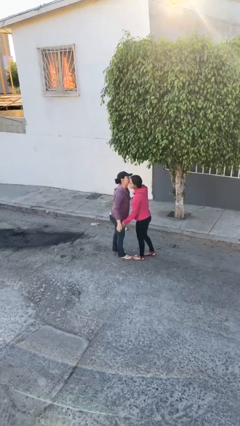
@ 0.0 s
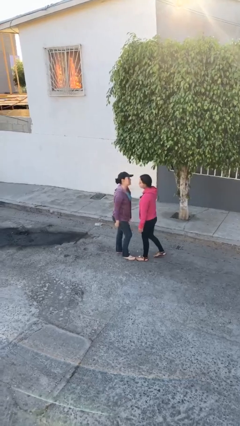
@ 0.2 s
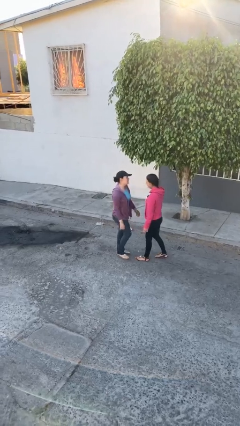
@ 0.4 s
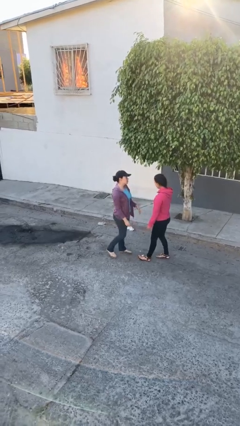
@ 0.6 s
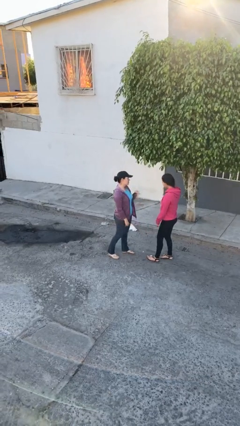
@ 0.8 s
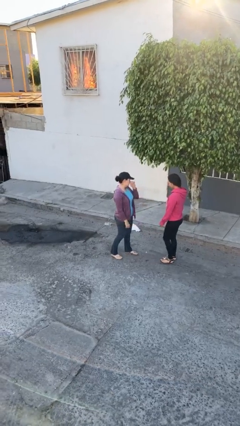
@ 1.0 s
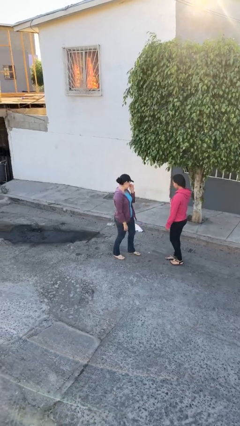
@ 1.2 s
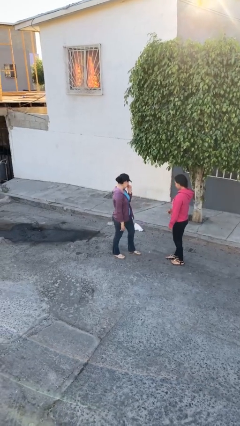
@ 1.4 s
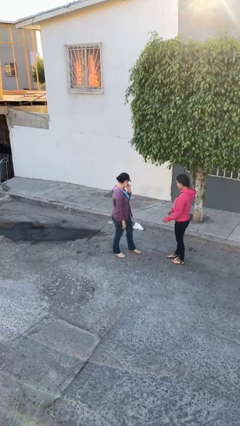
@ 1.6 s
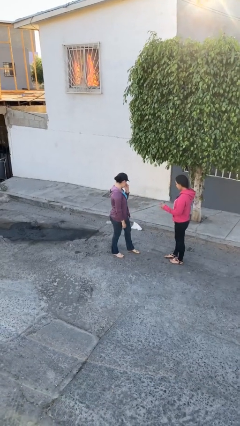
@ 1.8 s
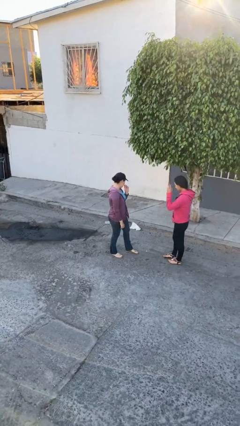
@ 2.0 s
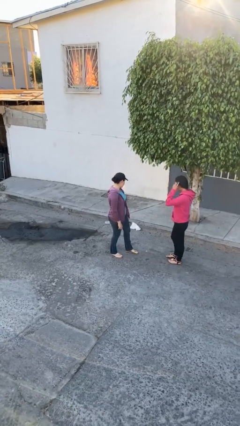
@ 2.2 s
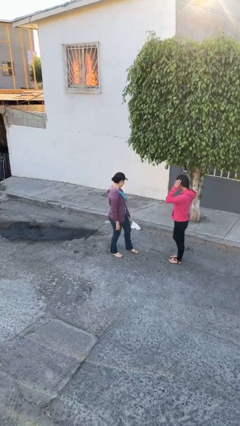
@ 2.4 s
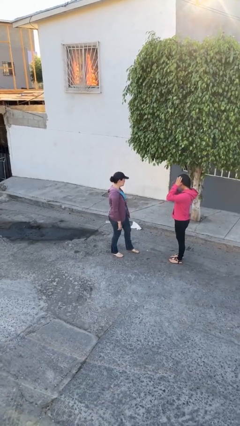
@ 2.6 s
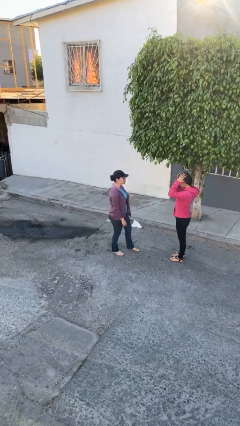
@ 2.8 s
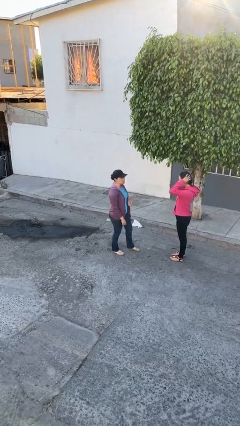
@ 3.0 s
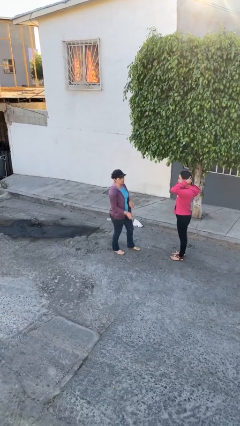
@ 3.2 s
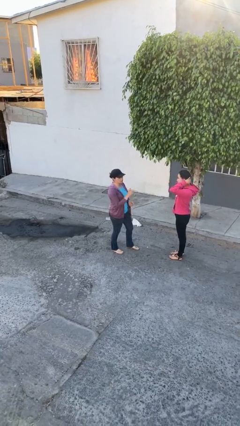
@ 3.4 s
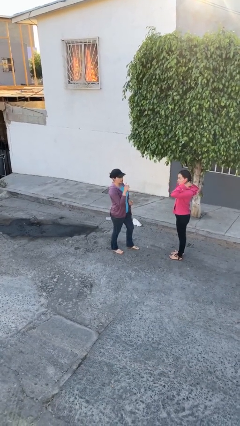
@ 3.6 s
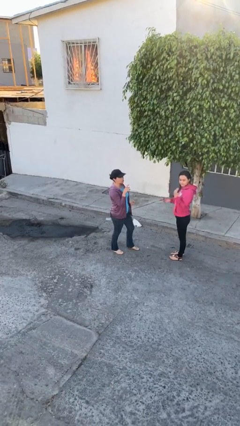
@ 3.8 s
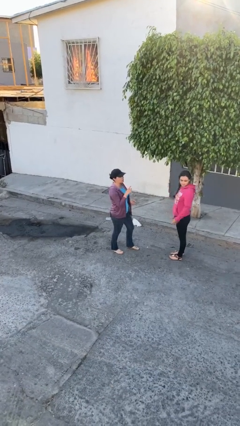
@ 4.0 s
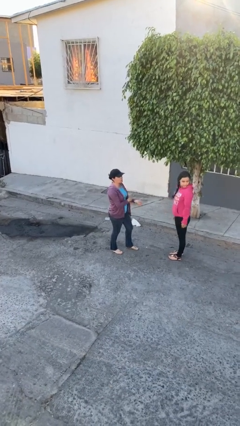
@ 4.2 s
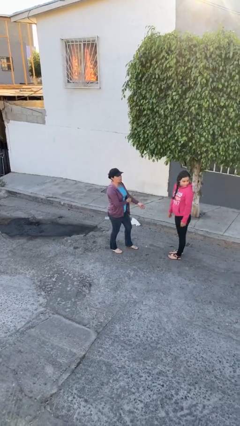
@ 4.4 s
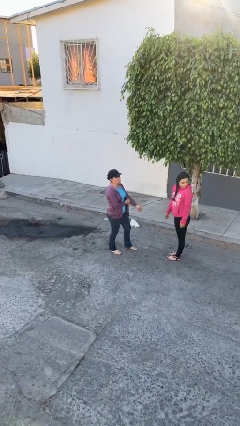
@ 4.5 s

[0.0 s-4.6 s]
person talks to person

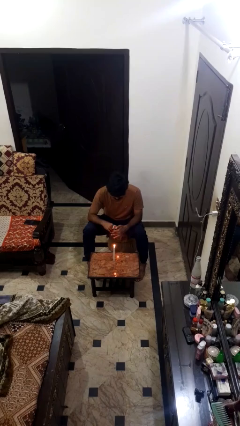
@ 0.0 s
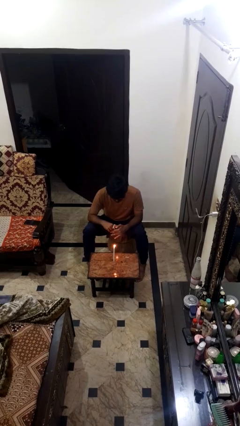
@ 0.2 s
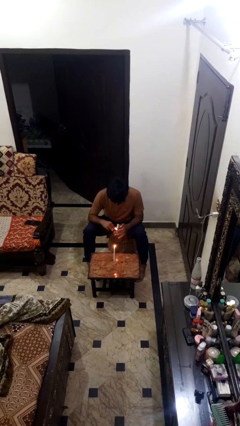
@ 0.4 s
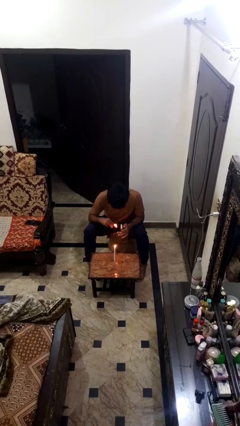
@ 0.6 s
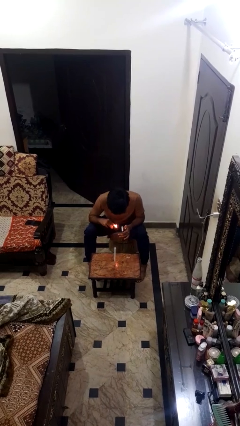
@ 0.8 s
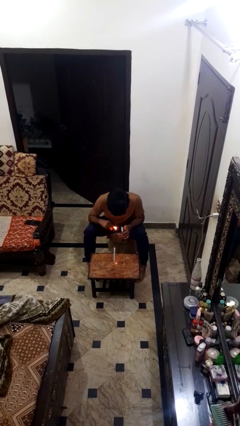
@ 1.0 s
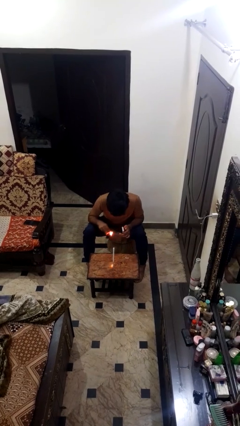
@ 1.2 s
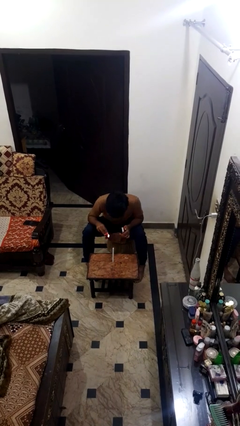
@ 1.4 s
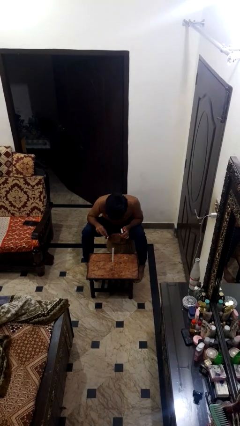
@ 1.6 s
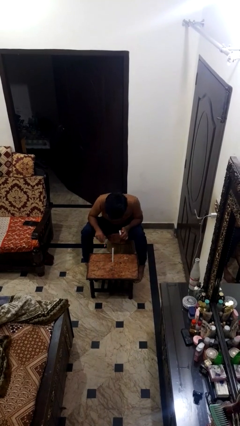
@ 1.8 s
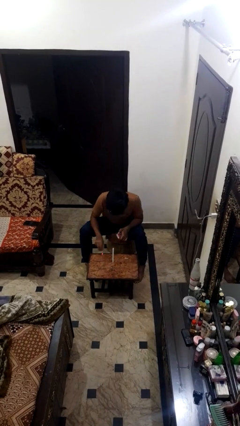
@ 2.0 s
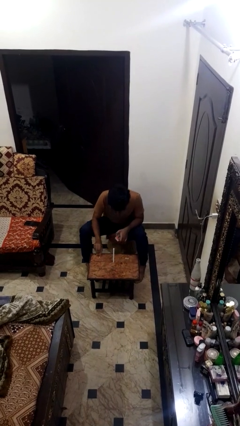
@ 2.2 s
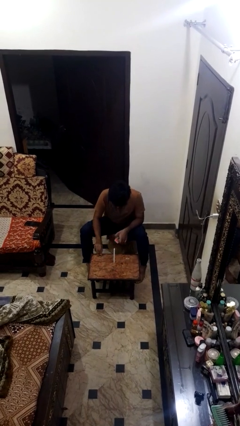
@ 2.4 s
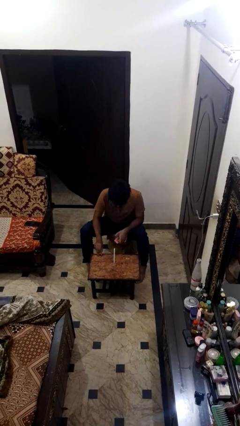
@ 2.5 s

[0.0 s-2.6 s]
person extinguishes candle

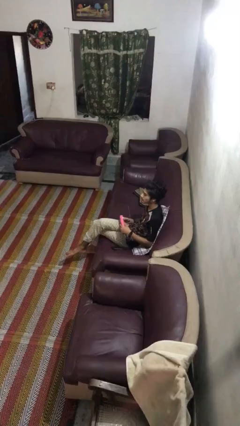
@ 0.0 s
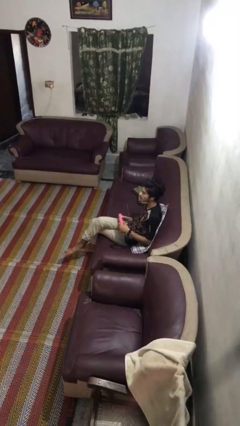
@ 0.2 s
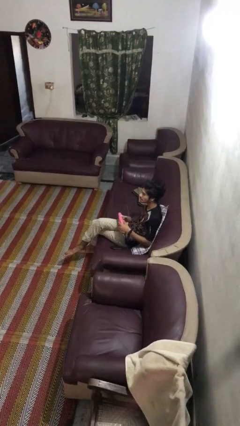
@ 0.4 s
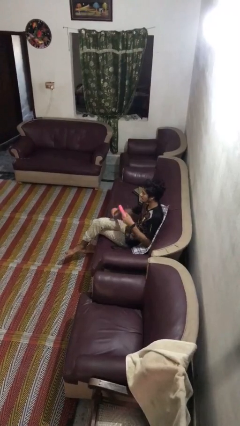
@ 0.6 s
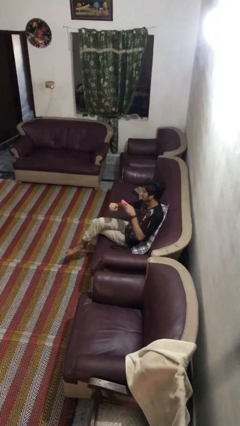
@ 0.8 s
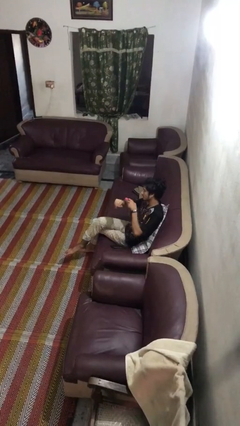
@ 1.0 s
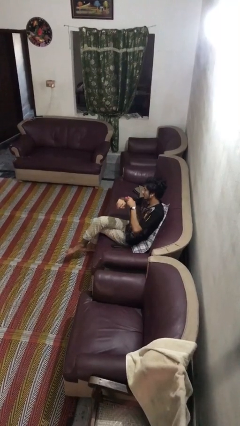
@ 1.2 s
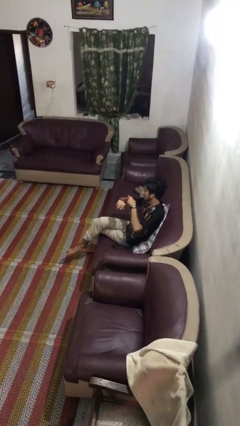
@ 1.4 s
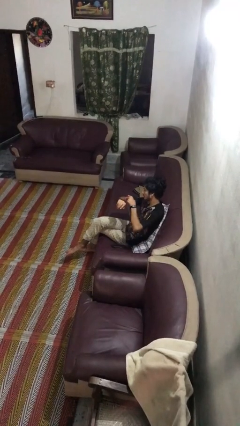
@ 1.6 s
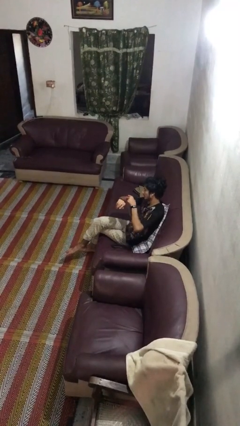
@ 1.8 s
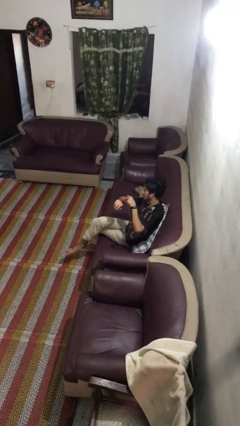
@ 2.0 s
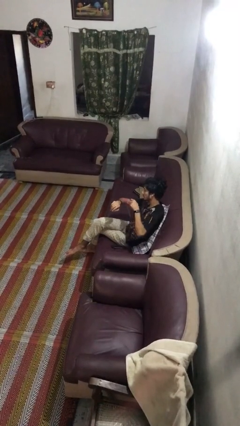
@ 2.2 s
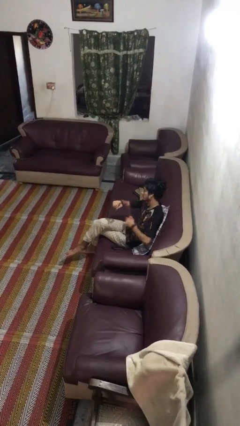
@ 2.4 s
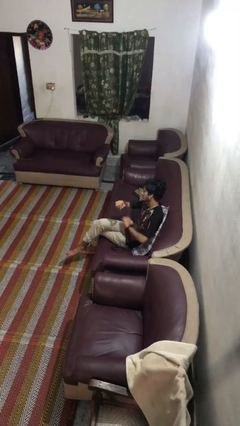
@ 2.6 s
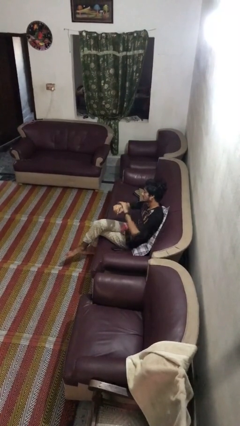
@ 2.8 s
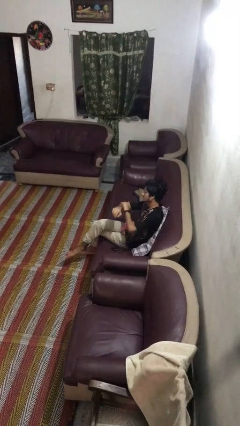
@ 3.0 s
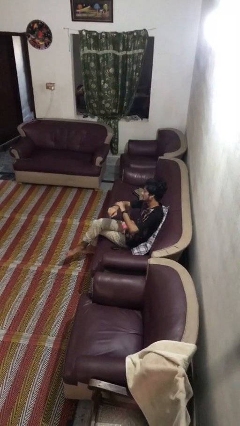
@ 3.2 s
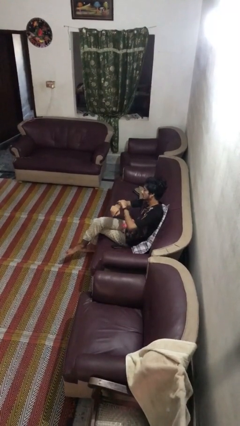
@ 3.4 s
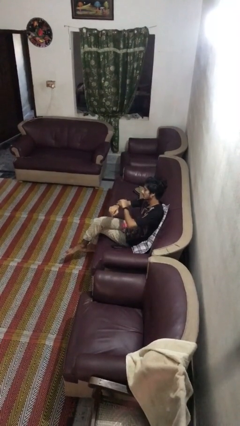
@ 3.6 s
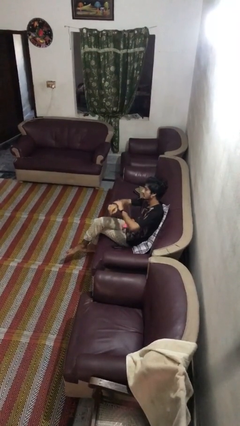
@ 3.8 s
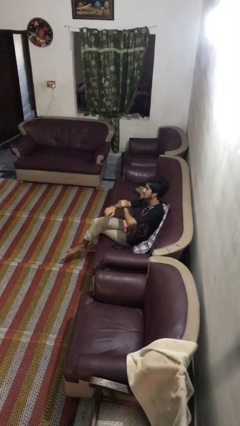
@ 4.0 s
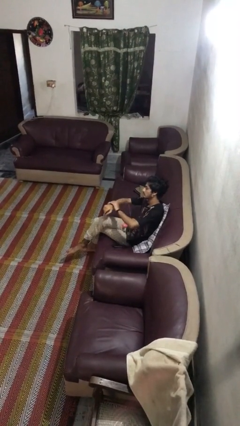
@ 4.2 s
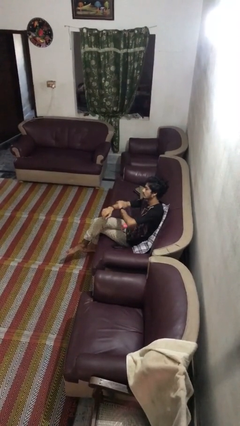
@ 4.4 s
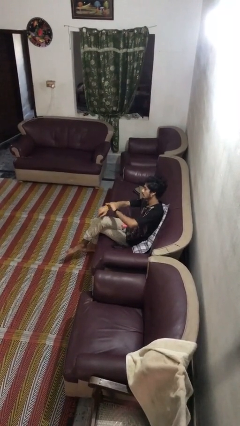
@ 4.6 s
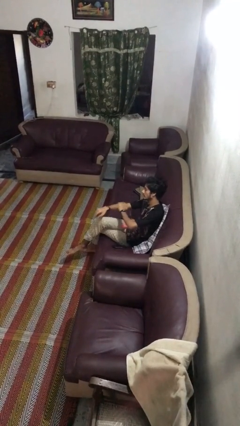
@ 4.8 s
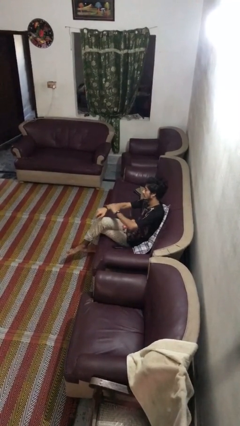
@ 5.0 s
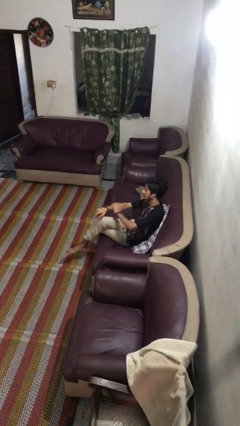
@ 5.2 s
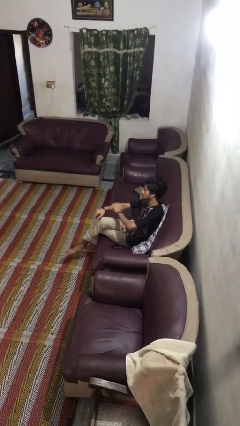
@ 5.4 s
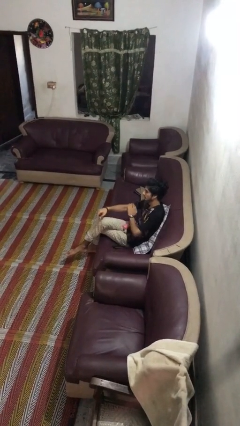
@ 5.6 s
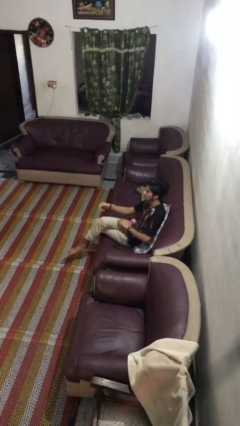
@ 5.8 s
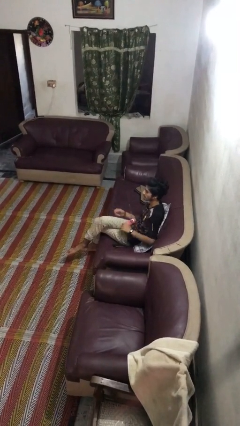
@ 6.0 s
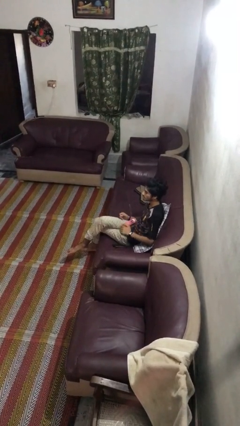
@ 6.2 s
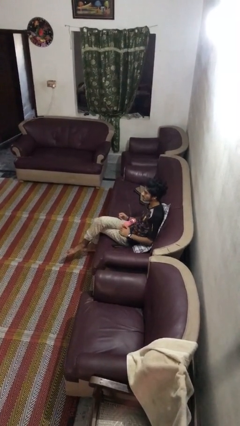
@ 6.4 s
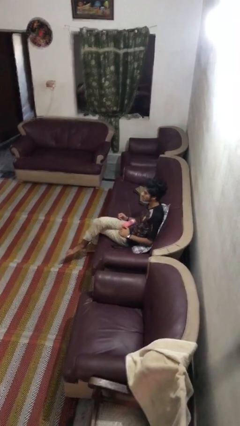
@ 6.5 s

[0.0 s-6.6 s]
person applies sunscreen

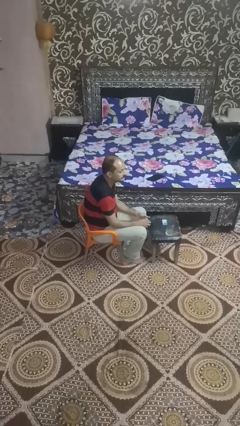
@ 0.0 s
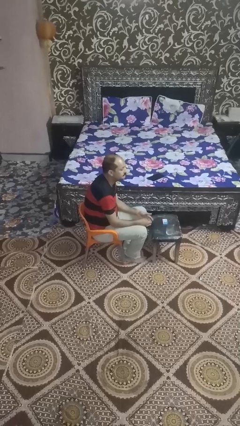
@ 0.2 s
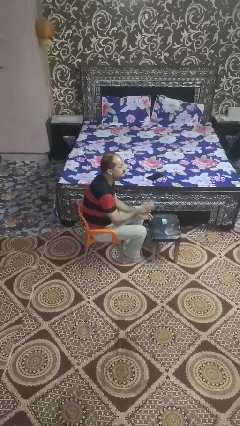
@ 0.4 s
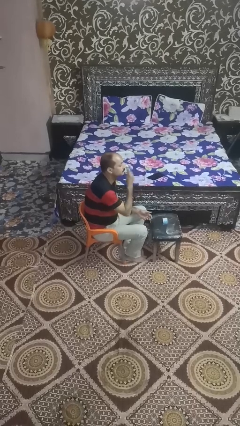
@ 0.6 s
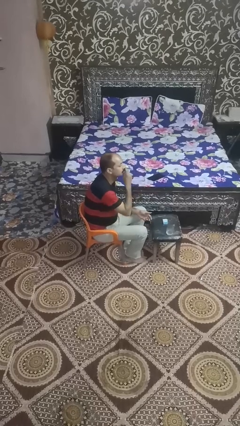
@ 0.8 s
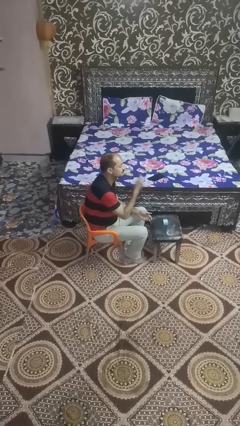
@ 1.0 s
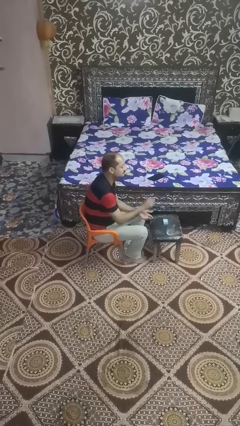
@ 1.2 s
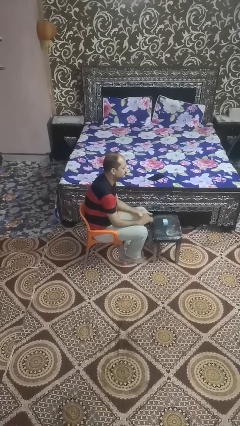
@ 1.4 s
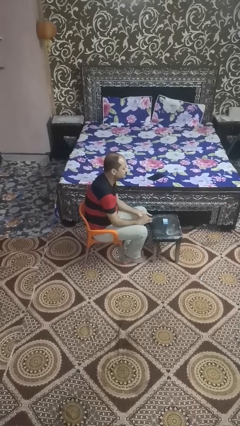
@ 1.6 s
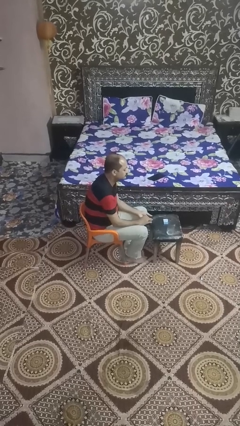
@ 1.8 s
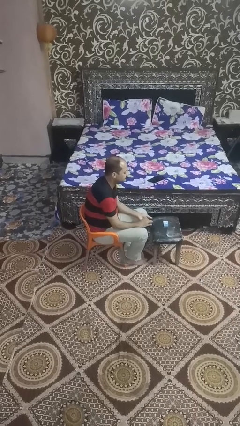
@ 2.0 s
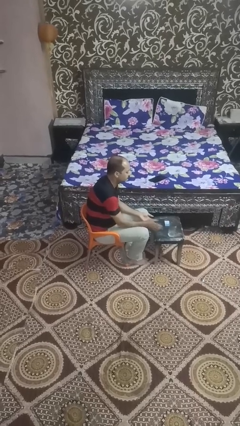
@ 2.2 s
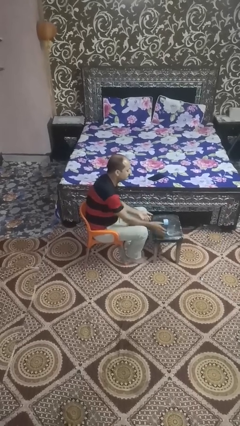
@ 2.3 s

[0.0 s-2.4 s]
person spills on table

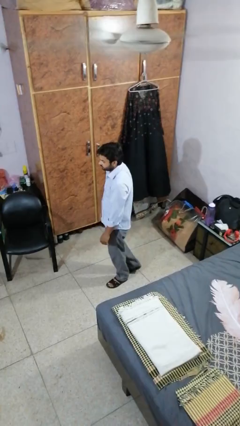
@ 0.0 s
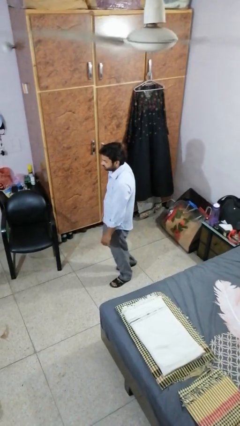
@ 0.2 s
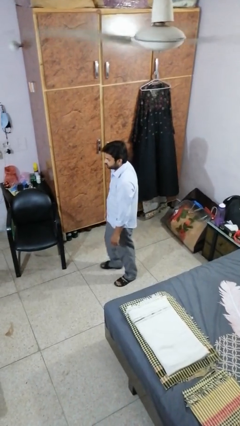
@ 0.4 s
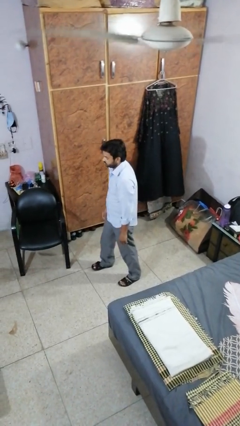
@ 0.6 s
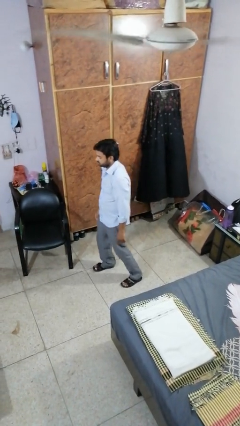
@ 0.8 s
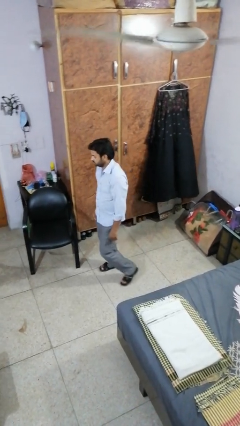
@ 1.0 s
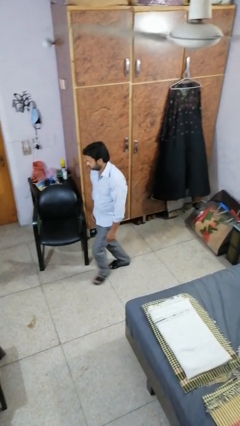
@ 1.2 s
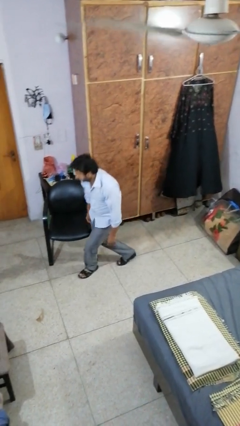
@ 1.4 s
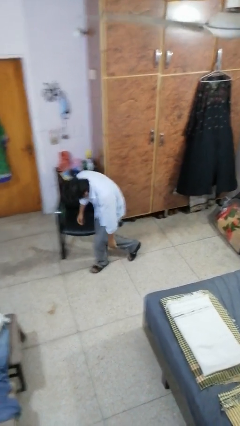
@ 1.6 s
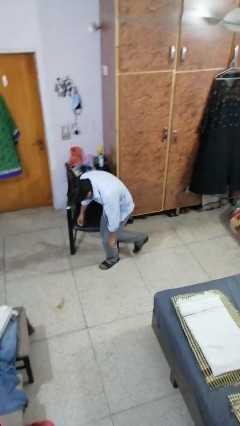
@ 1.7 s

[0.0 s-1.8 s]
person trips on object on floor
